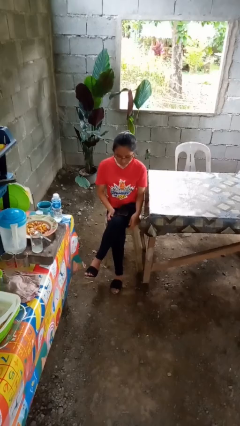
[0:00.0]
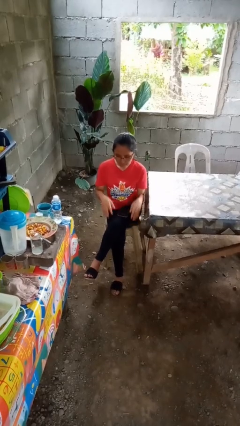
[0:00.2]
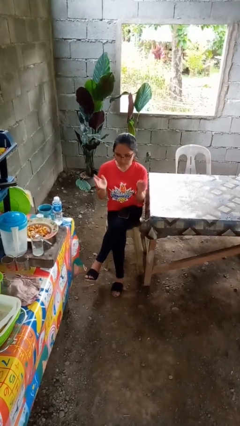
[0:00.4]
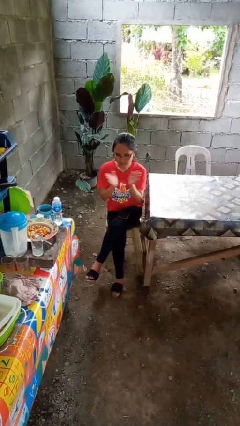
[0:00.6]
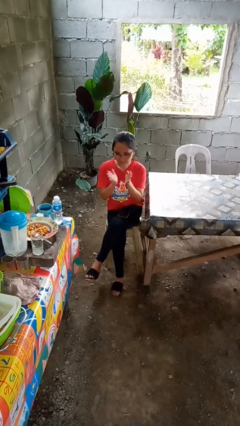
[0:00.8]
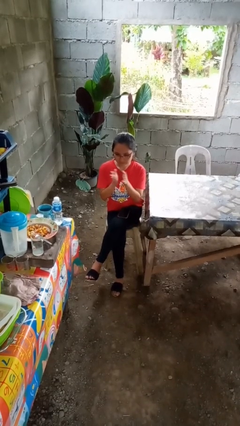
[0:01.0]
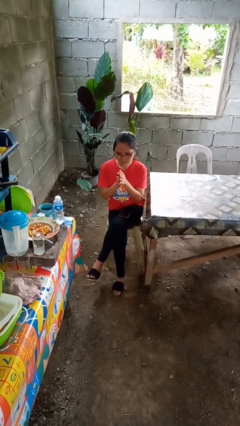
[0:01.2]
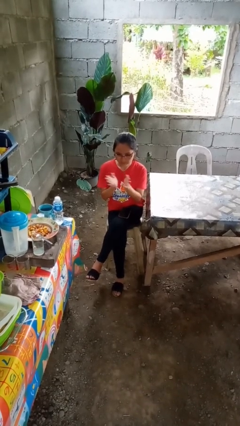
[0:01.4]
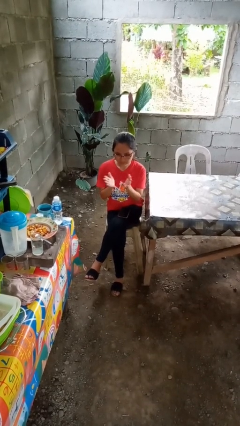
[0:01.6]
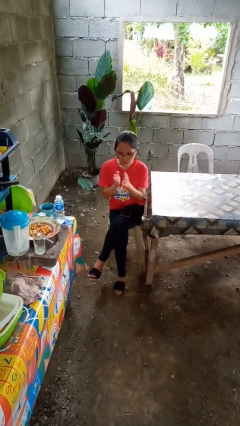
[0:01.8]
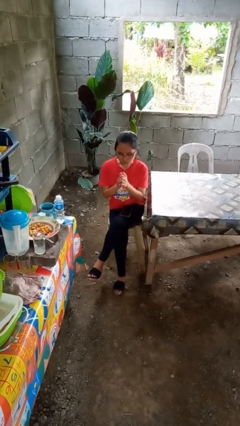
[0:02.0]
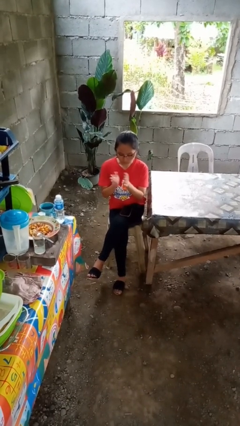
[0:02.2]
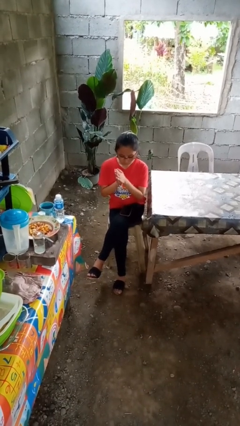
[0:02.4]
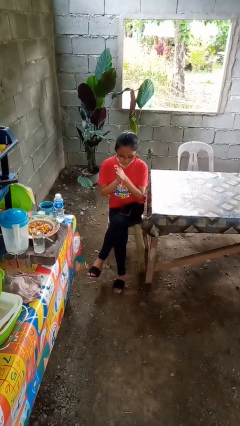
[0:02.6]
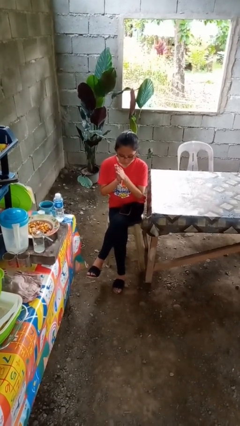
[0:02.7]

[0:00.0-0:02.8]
person claps hands

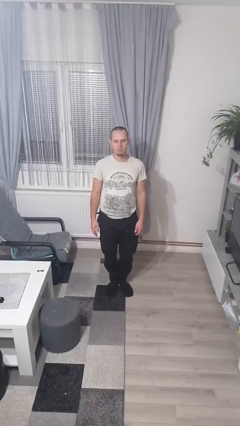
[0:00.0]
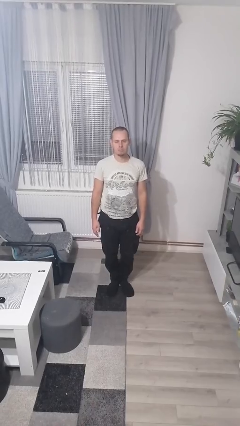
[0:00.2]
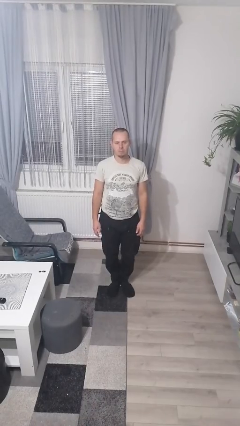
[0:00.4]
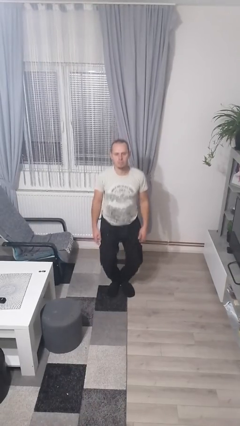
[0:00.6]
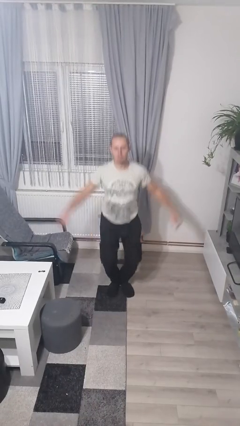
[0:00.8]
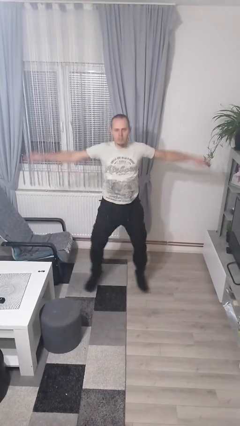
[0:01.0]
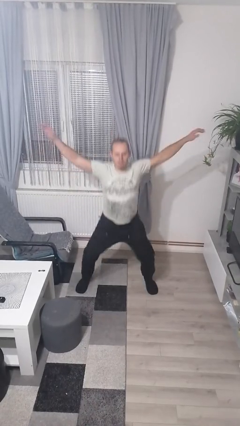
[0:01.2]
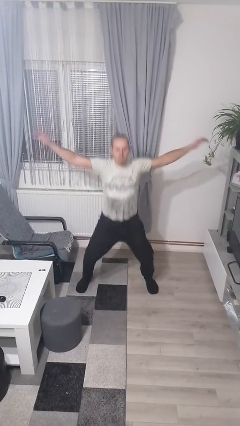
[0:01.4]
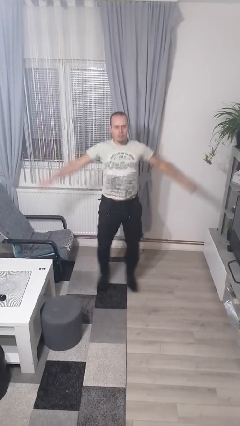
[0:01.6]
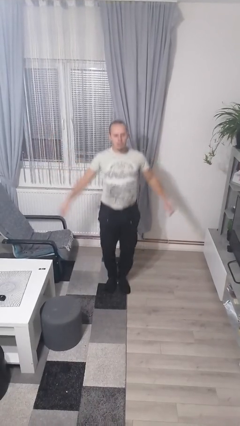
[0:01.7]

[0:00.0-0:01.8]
person exercises with jumping jacks

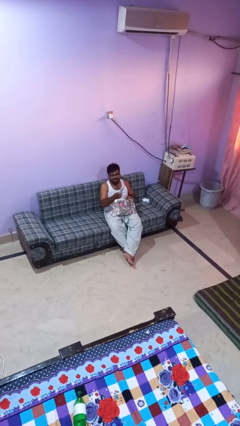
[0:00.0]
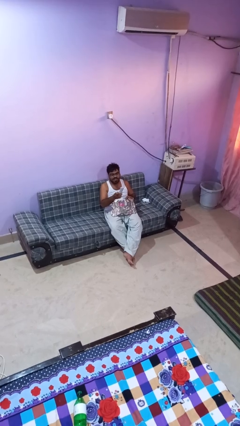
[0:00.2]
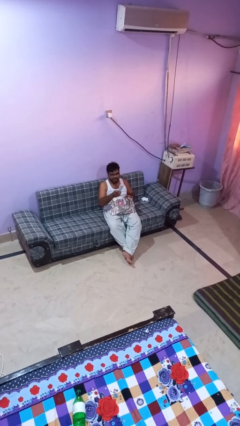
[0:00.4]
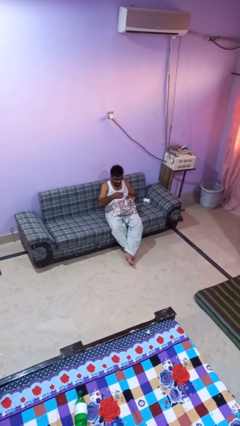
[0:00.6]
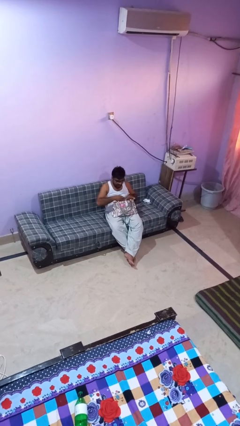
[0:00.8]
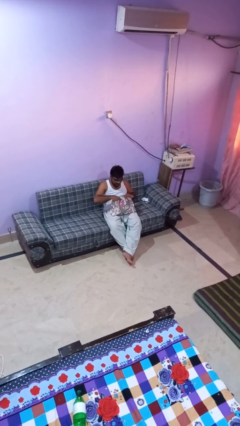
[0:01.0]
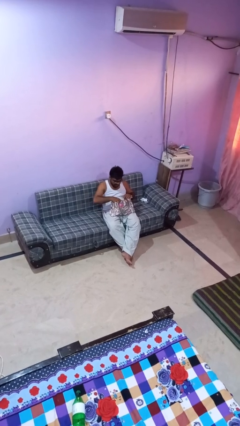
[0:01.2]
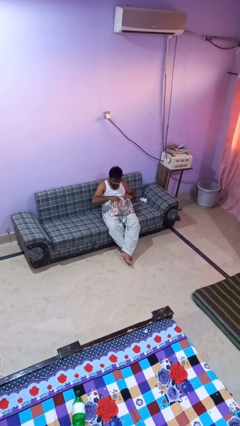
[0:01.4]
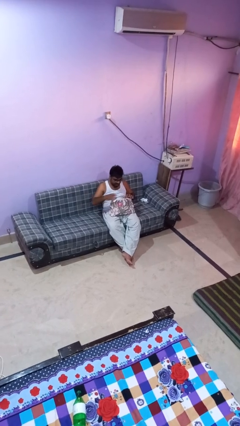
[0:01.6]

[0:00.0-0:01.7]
person puts object into purse

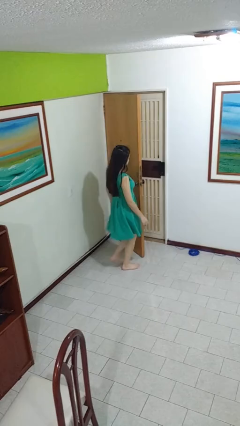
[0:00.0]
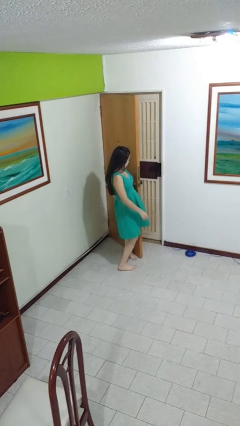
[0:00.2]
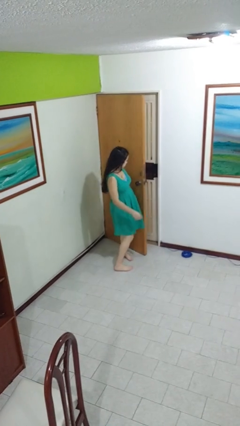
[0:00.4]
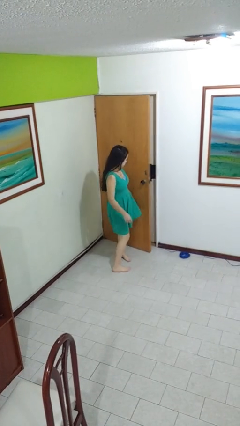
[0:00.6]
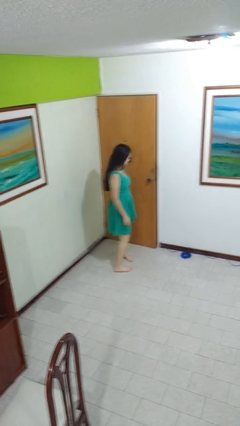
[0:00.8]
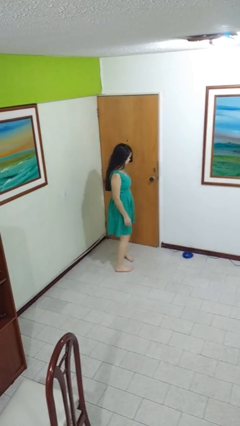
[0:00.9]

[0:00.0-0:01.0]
person closes door with hip

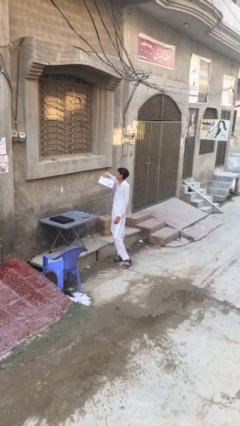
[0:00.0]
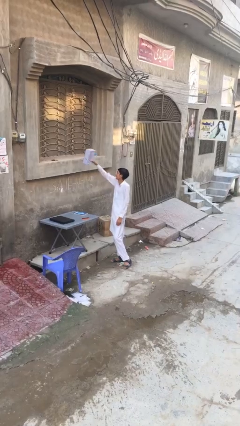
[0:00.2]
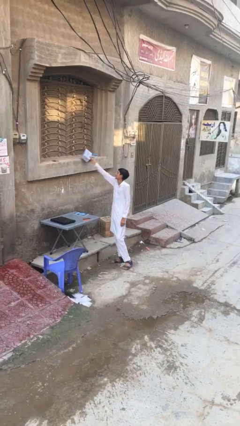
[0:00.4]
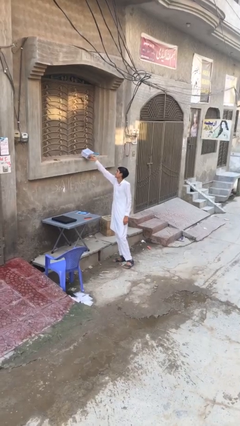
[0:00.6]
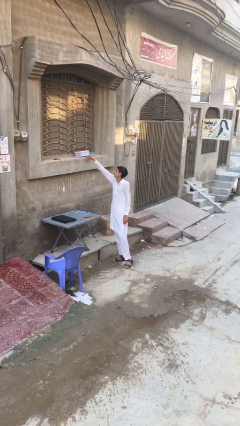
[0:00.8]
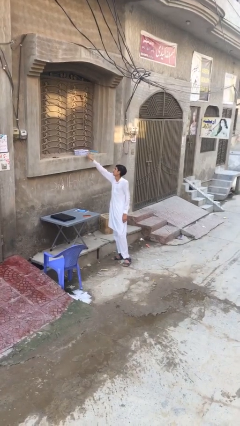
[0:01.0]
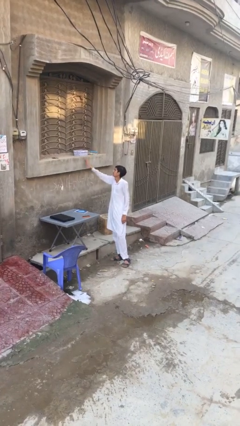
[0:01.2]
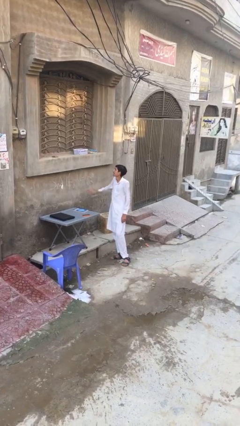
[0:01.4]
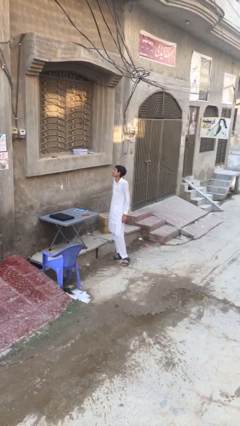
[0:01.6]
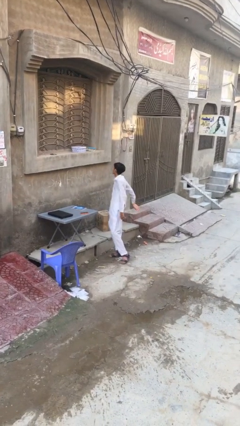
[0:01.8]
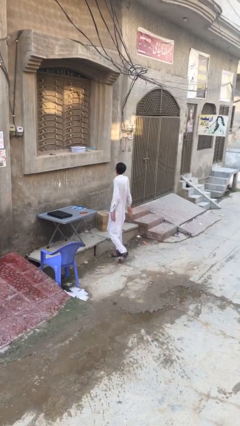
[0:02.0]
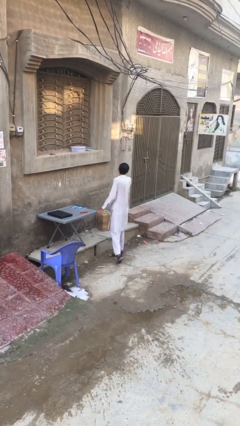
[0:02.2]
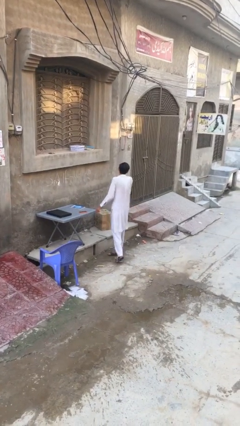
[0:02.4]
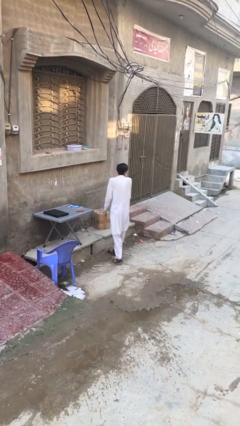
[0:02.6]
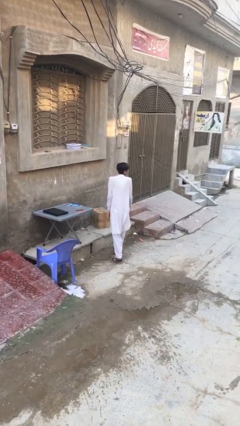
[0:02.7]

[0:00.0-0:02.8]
person puts down object on shelf

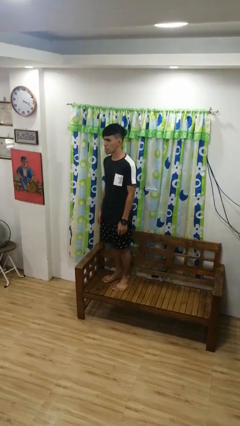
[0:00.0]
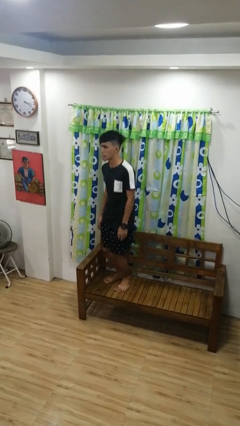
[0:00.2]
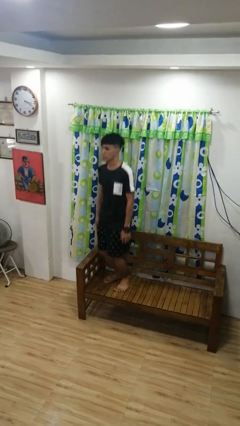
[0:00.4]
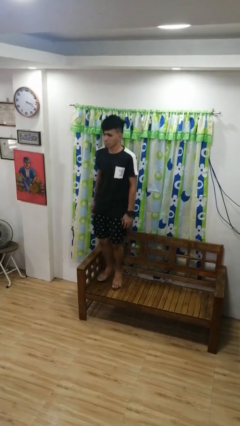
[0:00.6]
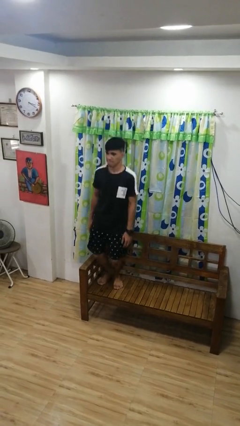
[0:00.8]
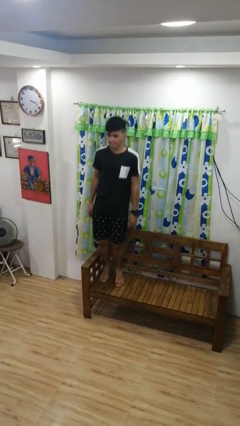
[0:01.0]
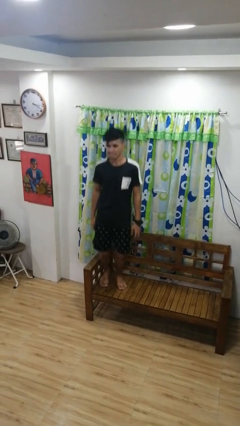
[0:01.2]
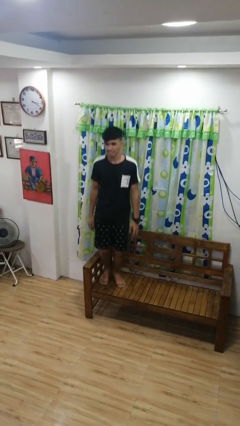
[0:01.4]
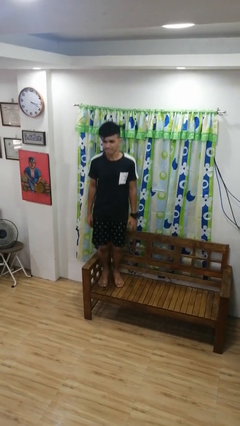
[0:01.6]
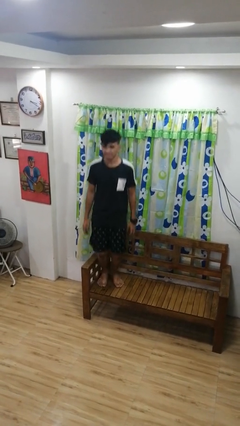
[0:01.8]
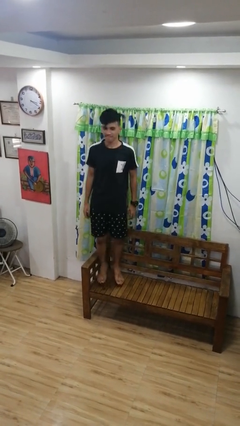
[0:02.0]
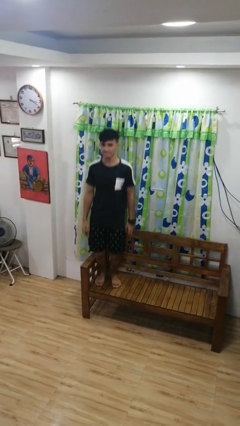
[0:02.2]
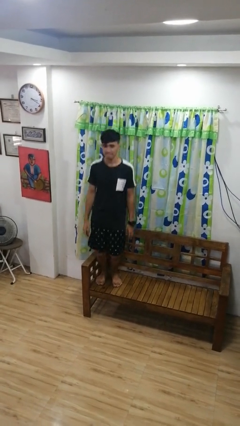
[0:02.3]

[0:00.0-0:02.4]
person jumps on couch

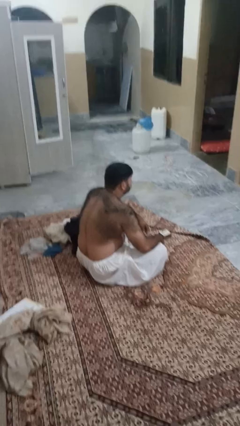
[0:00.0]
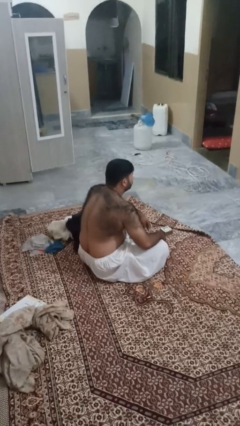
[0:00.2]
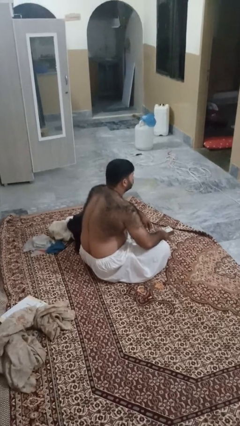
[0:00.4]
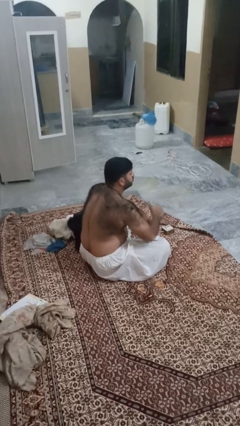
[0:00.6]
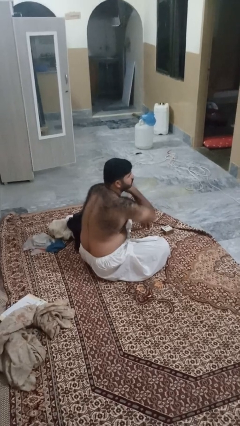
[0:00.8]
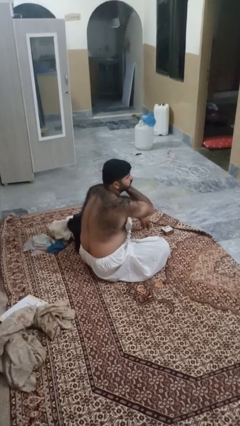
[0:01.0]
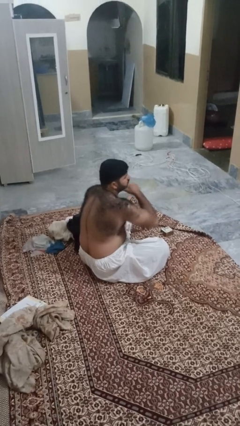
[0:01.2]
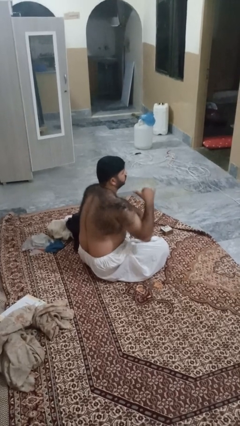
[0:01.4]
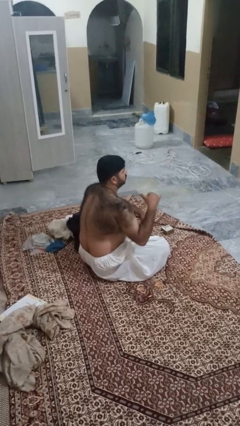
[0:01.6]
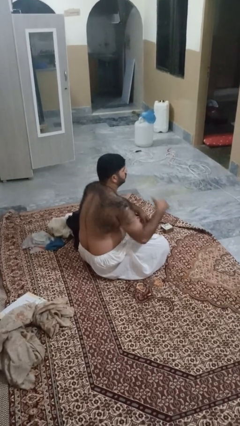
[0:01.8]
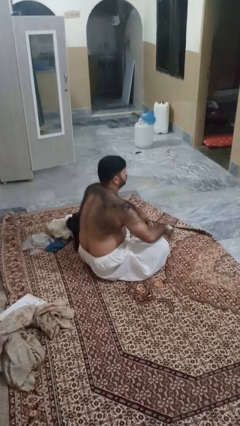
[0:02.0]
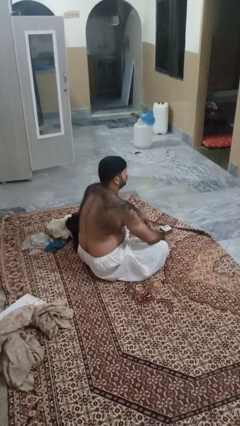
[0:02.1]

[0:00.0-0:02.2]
person gestures cut

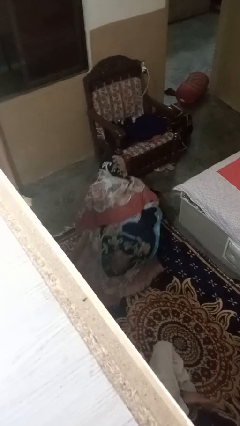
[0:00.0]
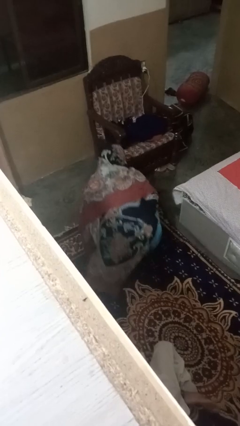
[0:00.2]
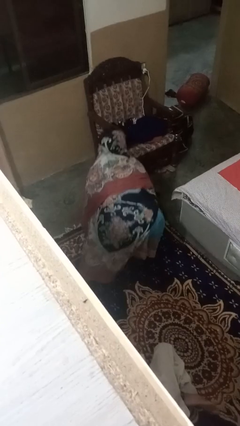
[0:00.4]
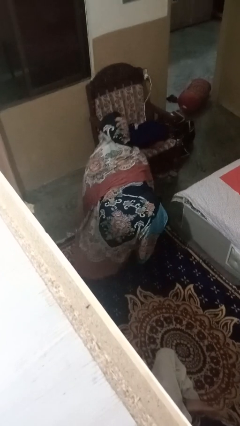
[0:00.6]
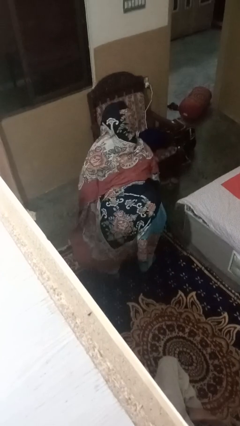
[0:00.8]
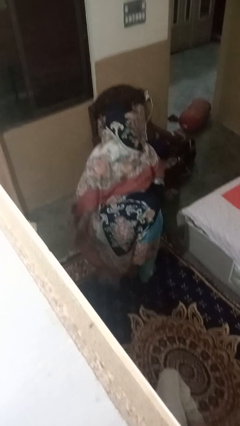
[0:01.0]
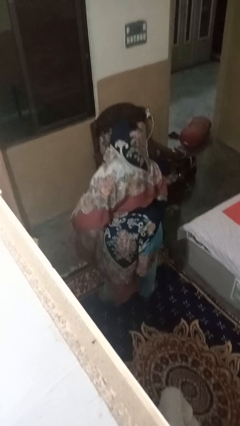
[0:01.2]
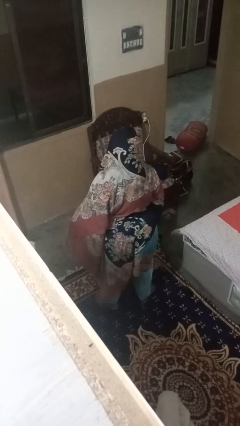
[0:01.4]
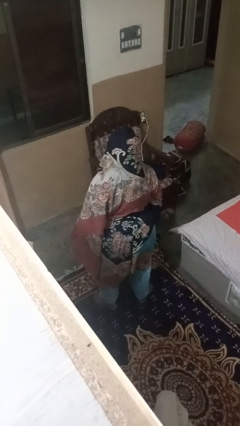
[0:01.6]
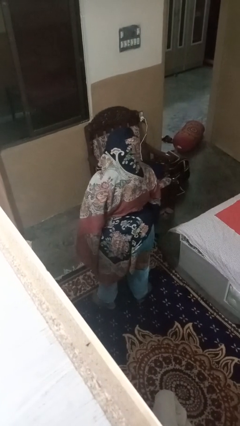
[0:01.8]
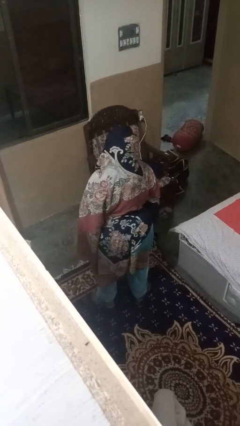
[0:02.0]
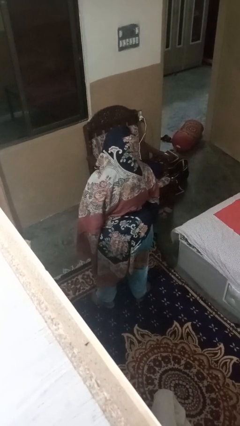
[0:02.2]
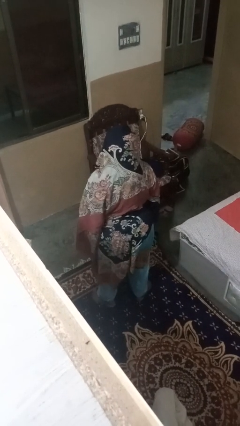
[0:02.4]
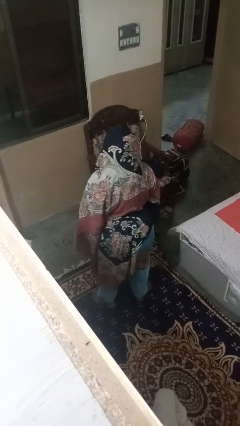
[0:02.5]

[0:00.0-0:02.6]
person stands up
